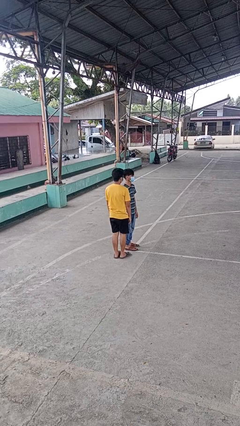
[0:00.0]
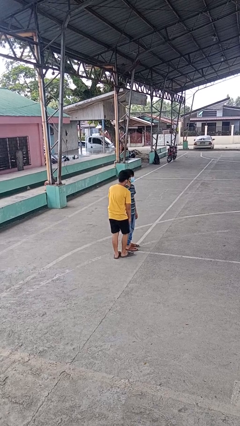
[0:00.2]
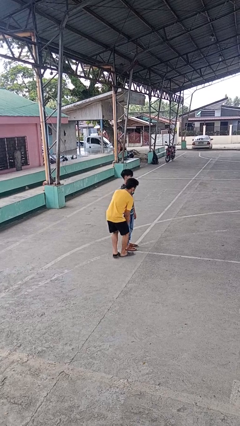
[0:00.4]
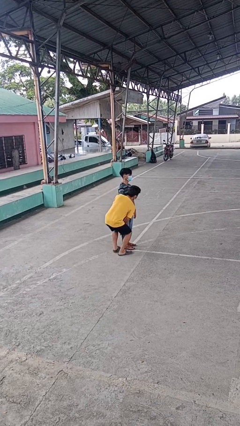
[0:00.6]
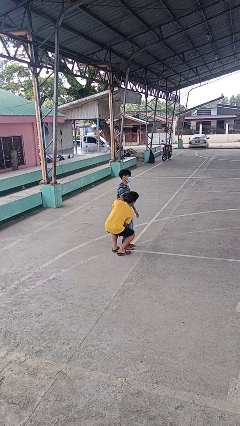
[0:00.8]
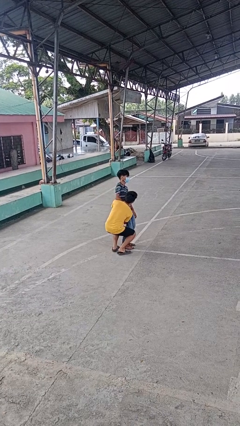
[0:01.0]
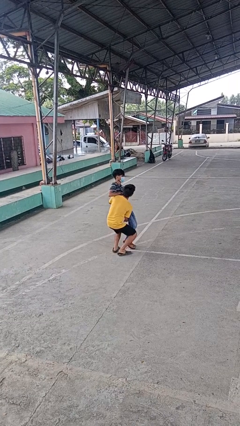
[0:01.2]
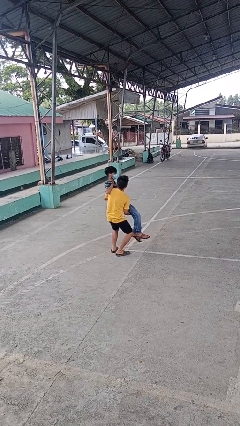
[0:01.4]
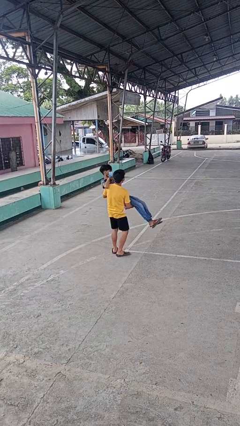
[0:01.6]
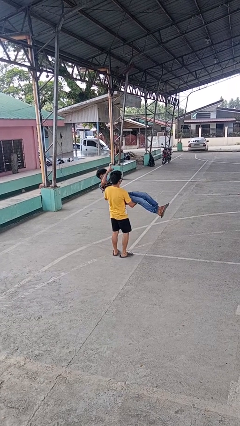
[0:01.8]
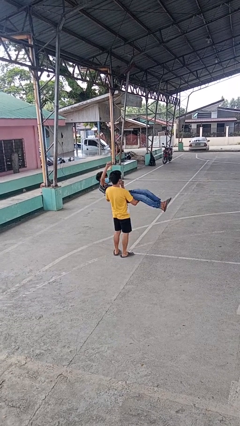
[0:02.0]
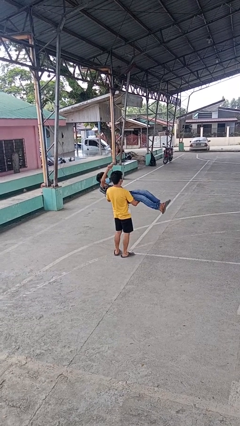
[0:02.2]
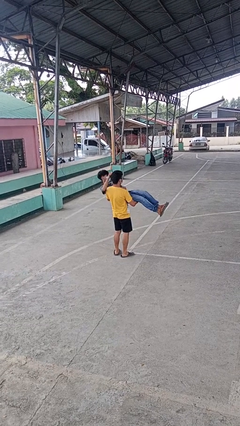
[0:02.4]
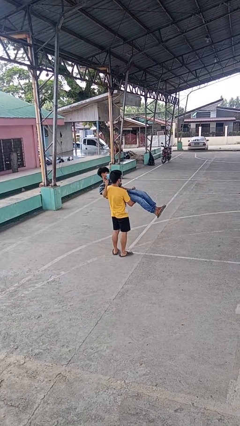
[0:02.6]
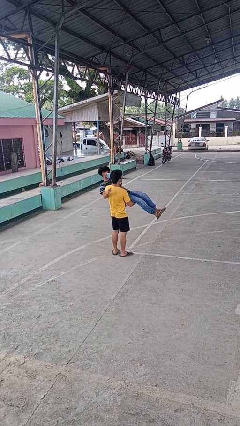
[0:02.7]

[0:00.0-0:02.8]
person picks up person

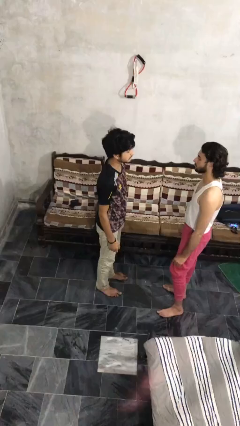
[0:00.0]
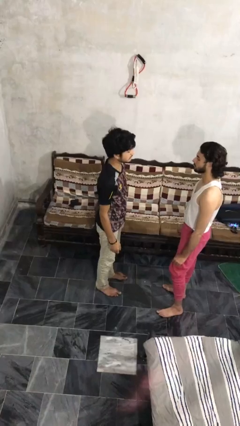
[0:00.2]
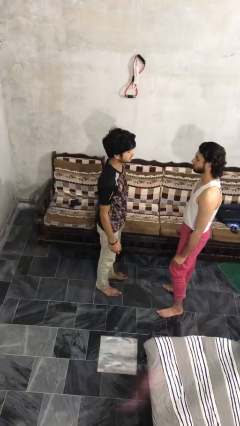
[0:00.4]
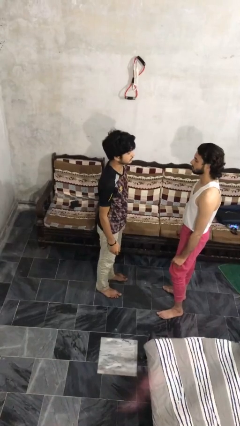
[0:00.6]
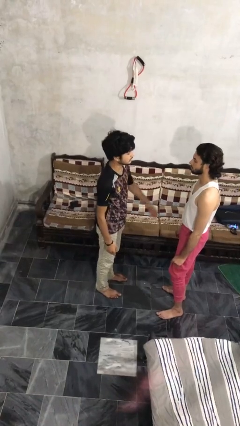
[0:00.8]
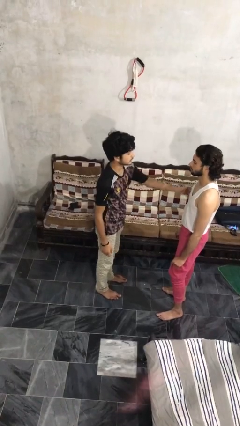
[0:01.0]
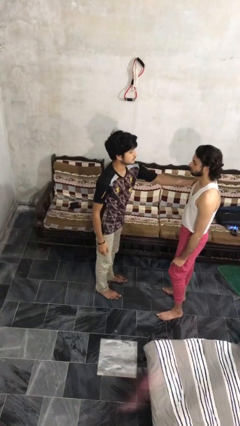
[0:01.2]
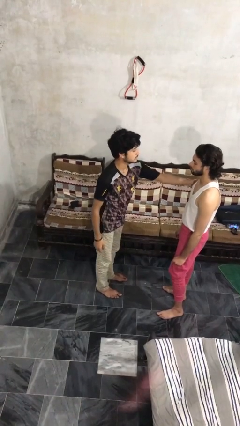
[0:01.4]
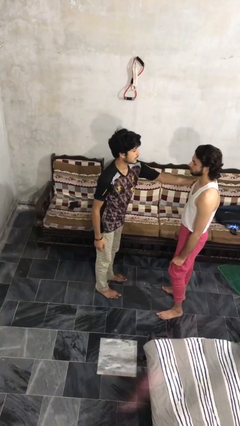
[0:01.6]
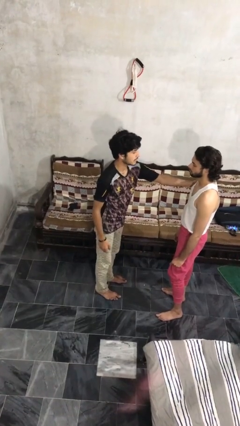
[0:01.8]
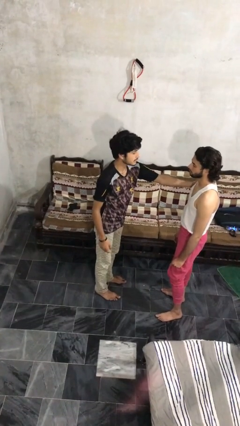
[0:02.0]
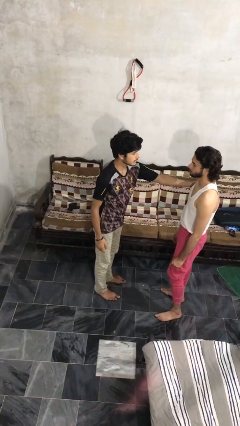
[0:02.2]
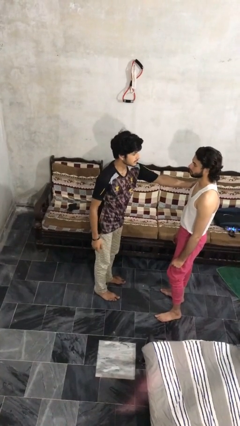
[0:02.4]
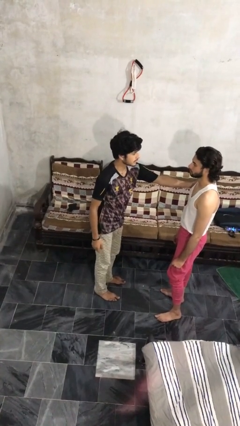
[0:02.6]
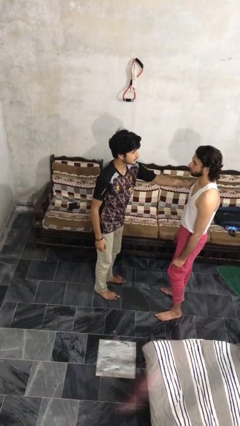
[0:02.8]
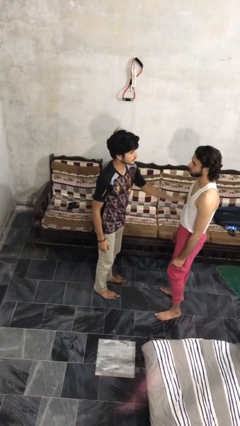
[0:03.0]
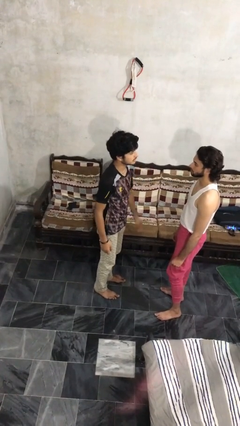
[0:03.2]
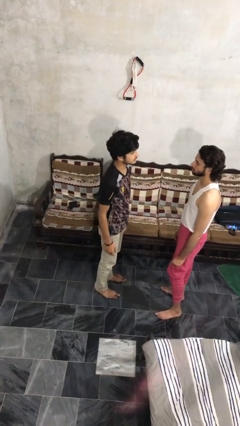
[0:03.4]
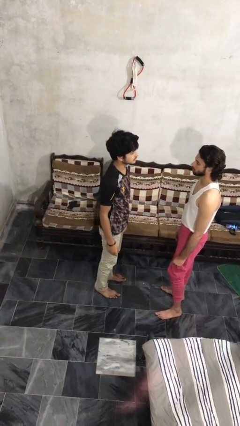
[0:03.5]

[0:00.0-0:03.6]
person grabs person by bicep

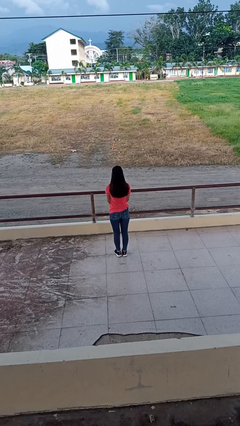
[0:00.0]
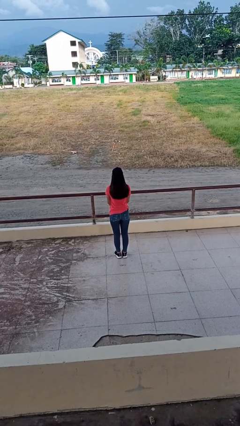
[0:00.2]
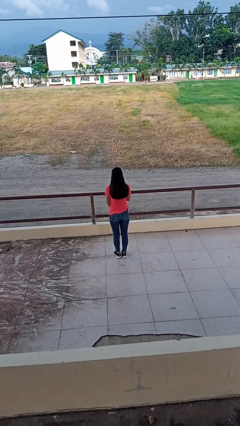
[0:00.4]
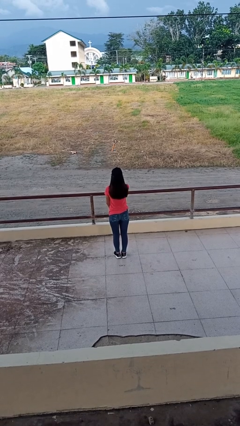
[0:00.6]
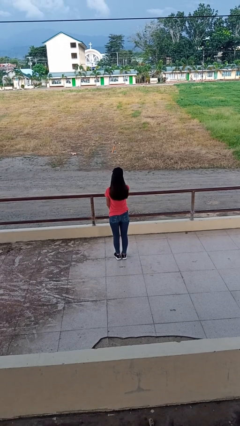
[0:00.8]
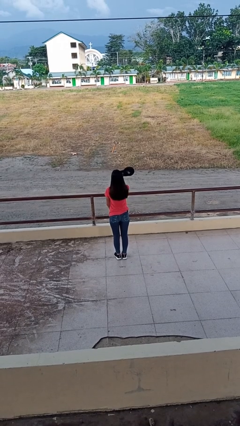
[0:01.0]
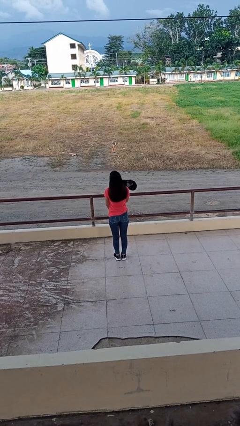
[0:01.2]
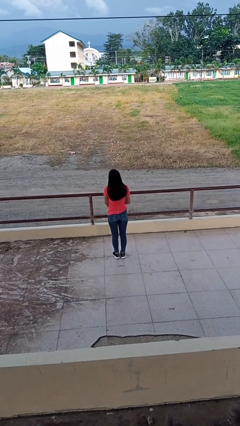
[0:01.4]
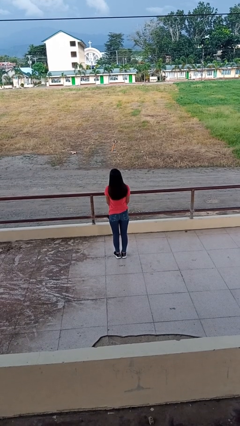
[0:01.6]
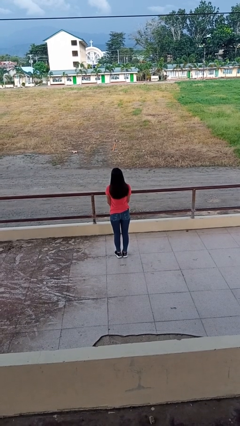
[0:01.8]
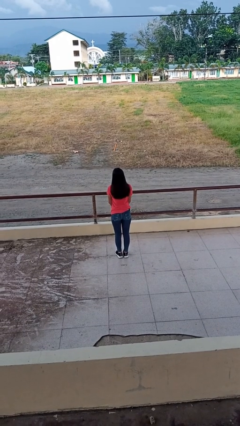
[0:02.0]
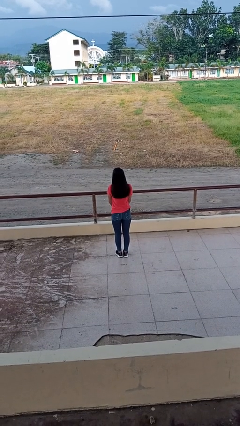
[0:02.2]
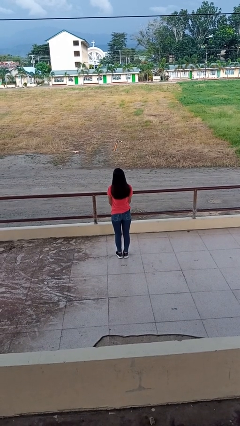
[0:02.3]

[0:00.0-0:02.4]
person takes off hat

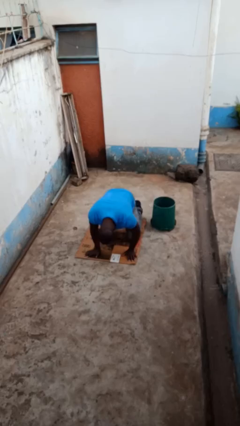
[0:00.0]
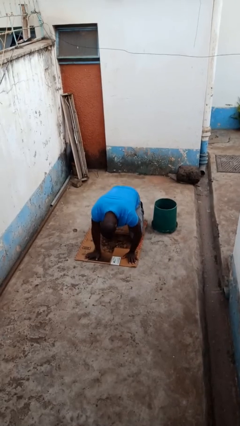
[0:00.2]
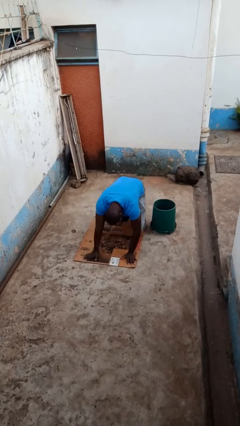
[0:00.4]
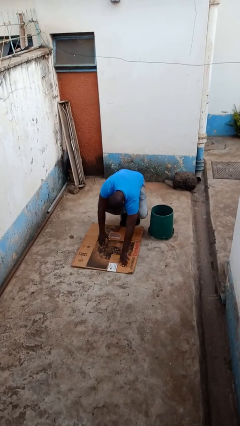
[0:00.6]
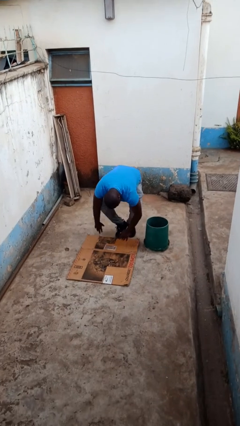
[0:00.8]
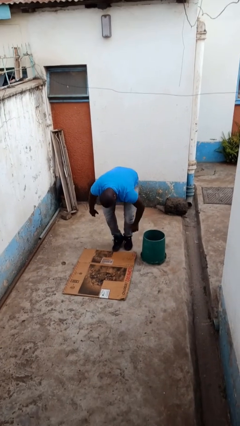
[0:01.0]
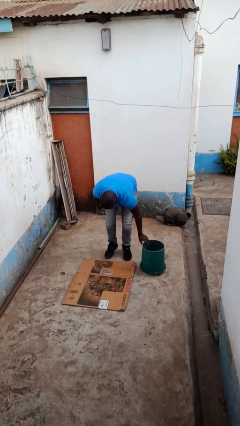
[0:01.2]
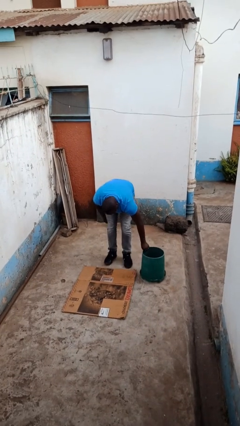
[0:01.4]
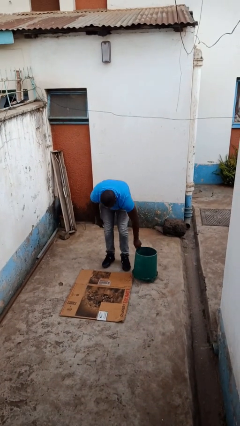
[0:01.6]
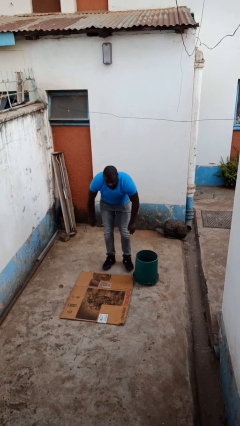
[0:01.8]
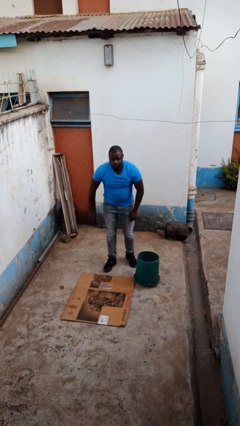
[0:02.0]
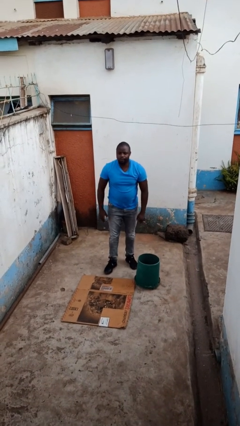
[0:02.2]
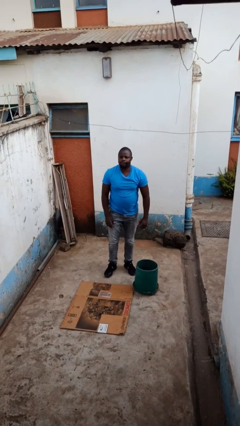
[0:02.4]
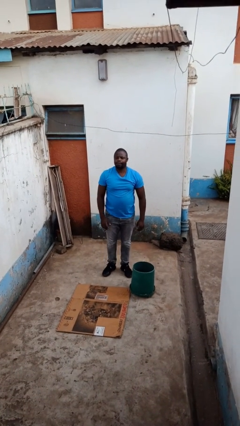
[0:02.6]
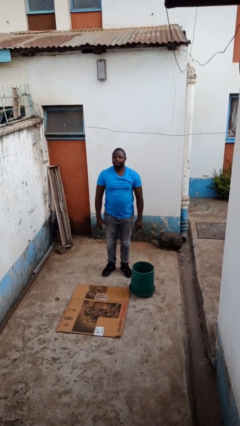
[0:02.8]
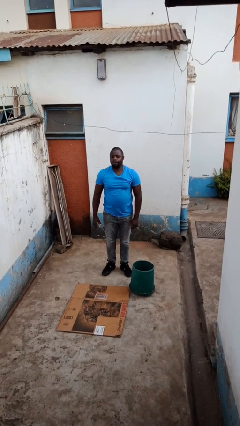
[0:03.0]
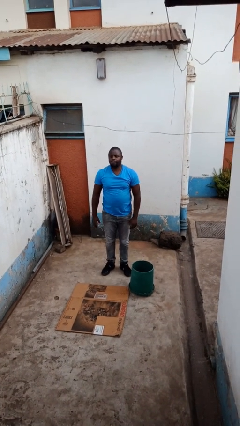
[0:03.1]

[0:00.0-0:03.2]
person stands up from floor

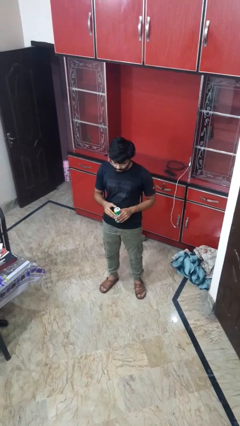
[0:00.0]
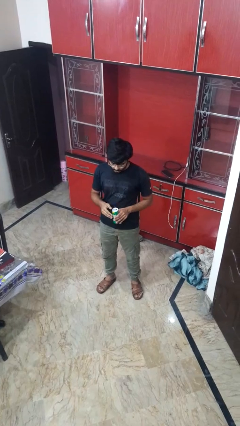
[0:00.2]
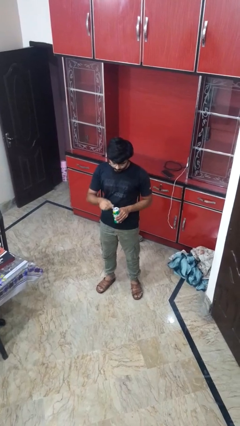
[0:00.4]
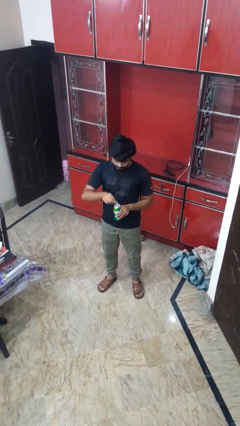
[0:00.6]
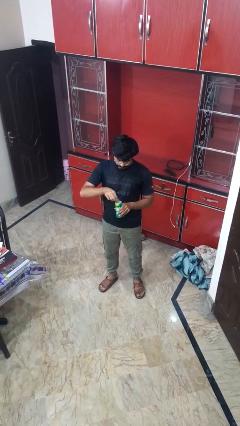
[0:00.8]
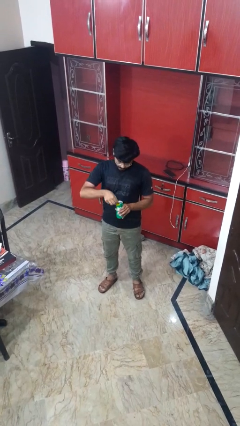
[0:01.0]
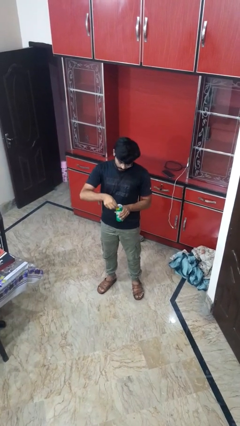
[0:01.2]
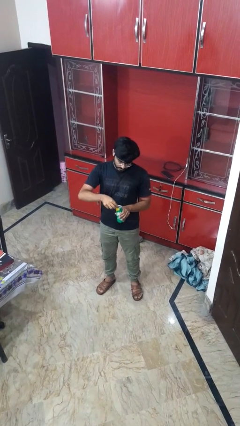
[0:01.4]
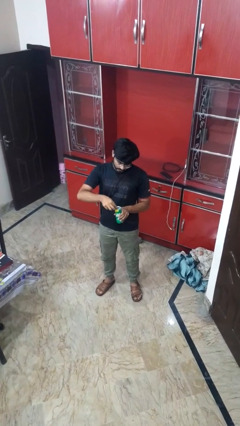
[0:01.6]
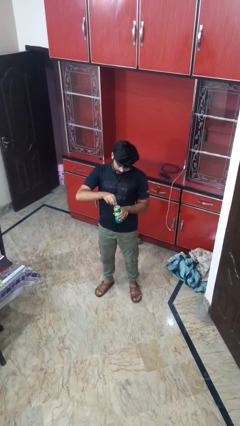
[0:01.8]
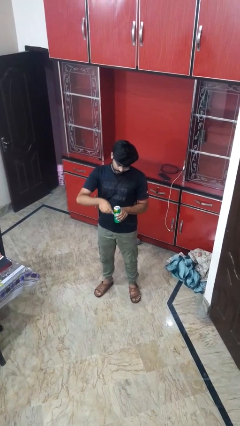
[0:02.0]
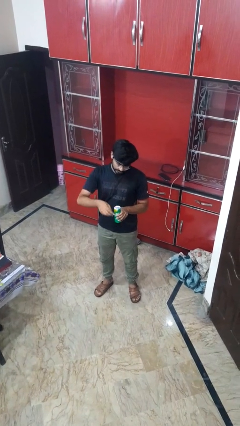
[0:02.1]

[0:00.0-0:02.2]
person opens beverage can

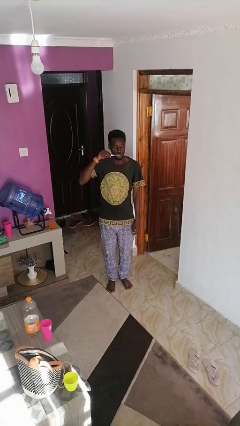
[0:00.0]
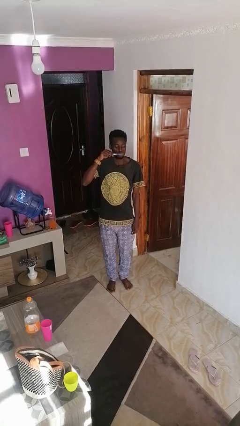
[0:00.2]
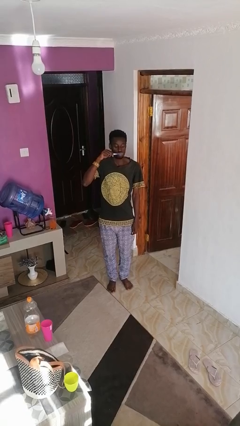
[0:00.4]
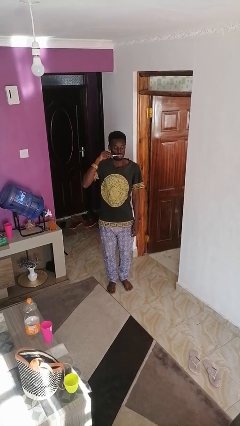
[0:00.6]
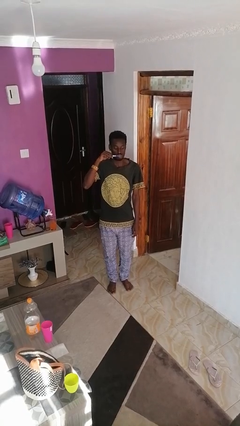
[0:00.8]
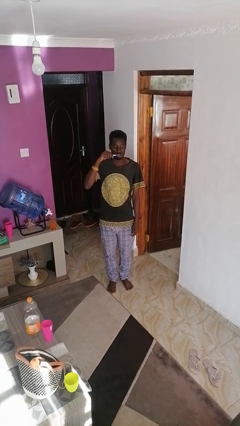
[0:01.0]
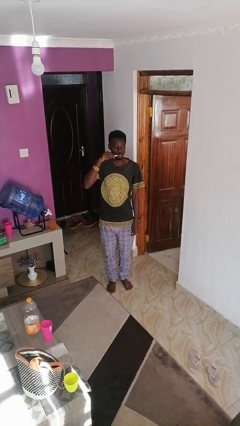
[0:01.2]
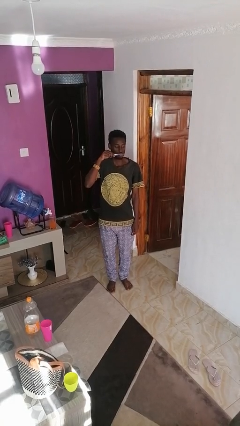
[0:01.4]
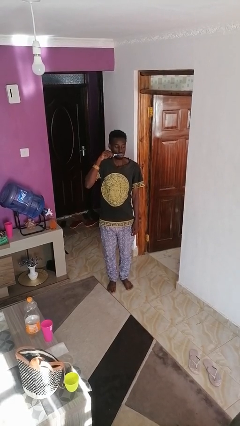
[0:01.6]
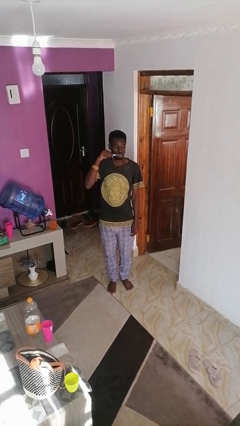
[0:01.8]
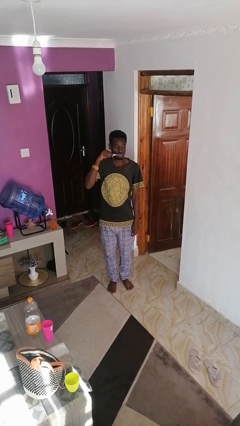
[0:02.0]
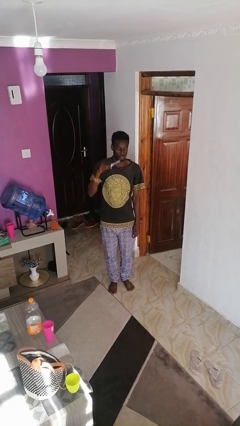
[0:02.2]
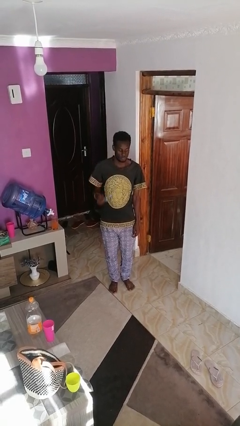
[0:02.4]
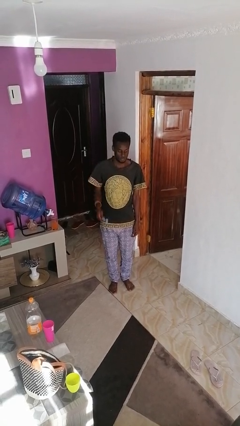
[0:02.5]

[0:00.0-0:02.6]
person brushes teeth

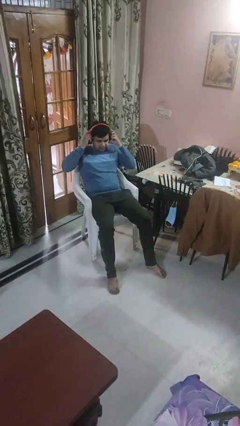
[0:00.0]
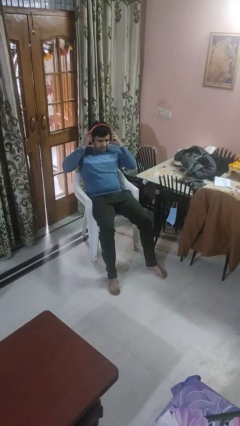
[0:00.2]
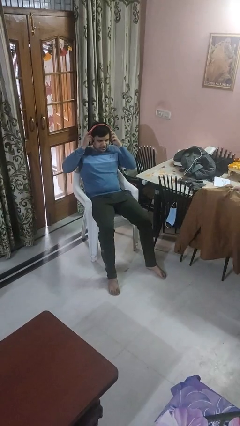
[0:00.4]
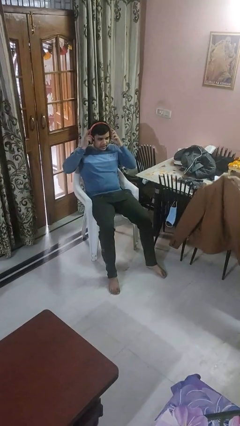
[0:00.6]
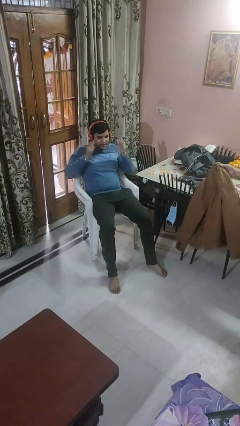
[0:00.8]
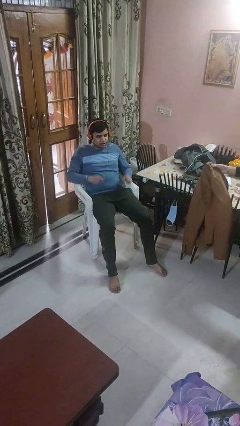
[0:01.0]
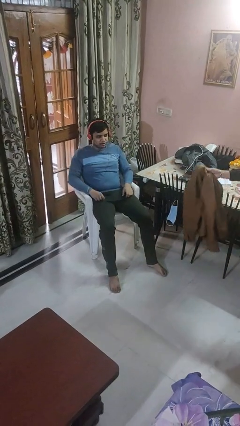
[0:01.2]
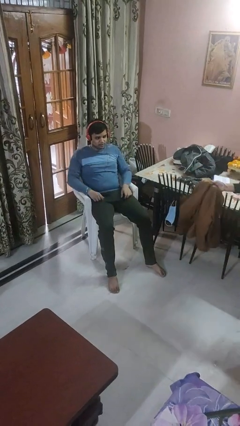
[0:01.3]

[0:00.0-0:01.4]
person puts on headphones
